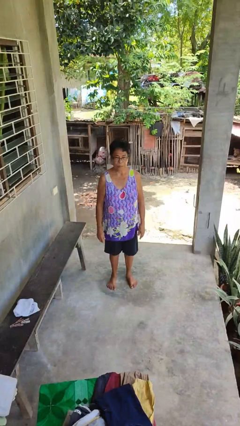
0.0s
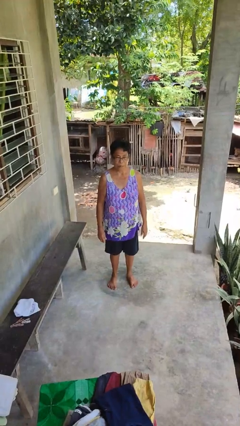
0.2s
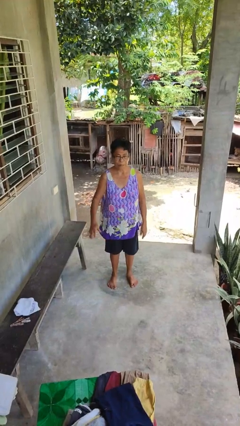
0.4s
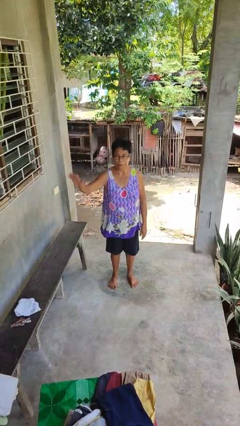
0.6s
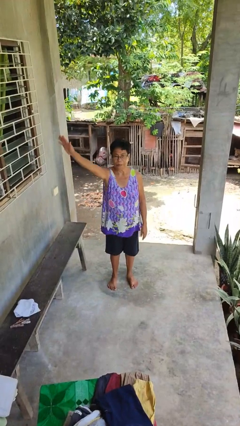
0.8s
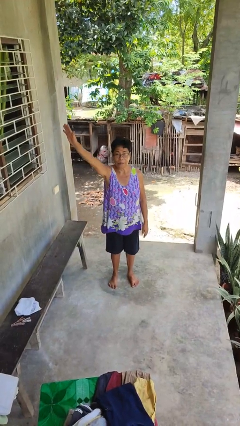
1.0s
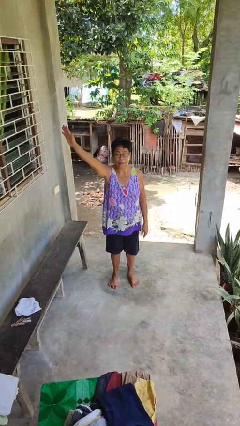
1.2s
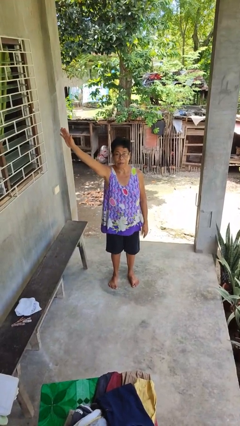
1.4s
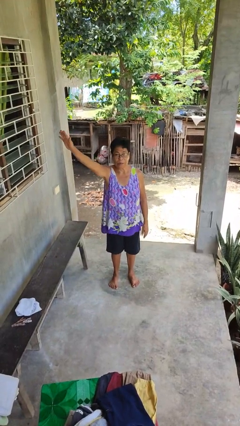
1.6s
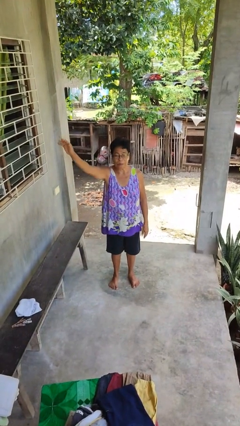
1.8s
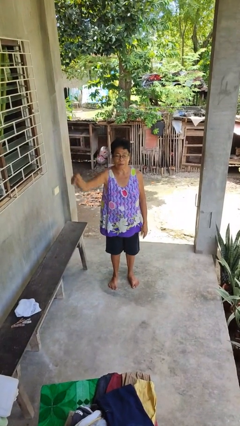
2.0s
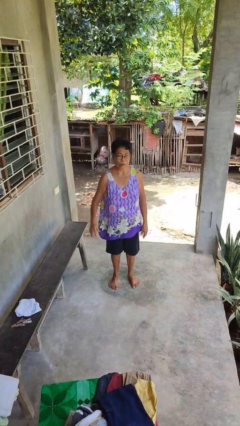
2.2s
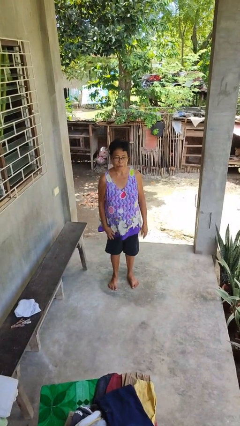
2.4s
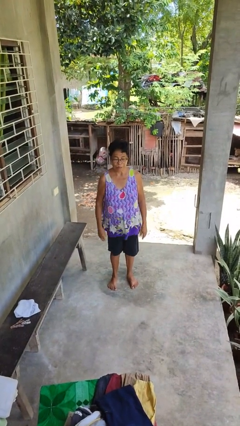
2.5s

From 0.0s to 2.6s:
person gestures stop

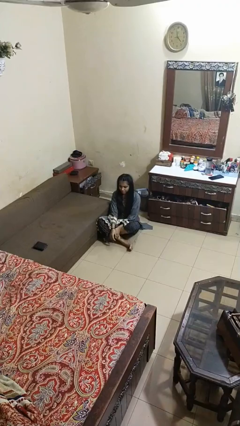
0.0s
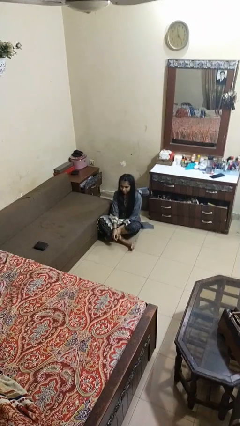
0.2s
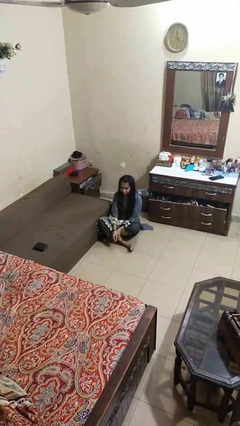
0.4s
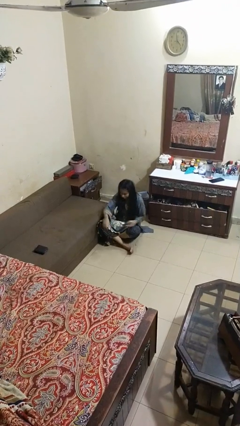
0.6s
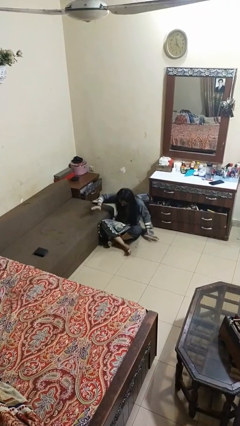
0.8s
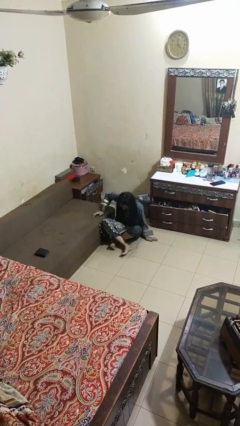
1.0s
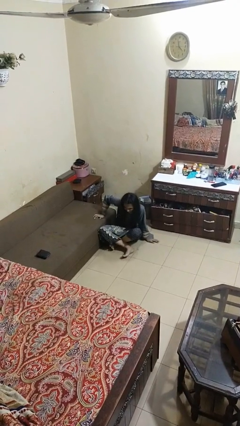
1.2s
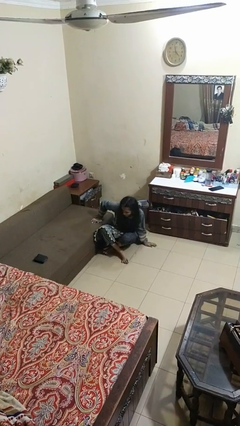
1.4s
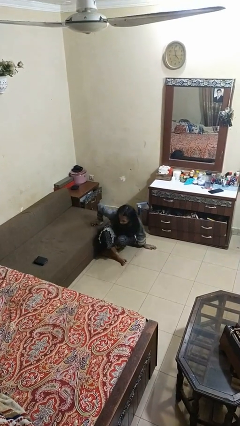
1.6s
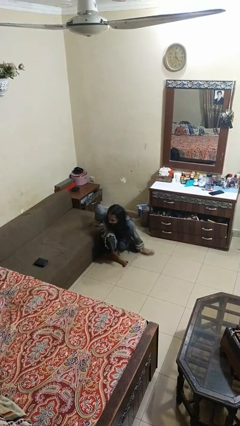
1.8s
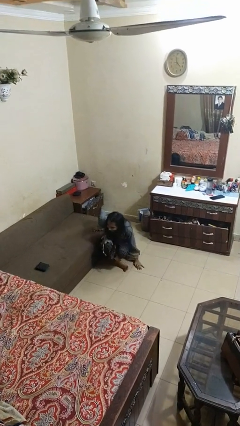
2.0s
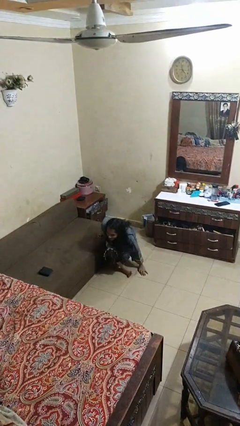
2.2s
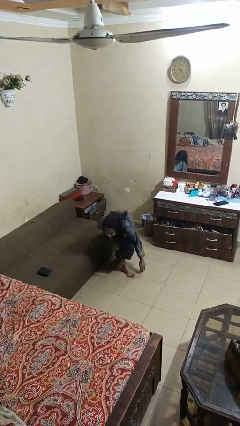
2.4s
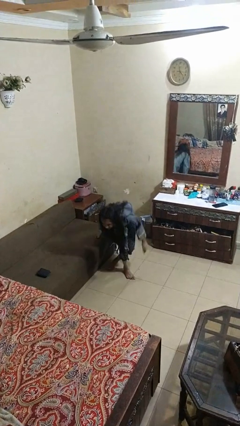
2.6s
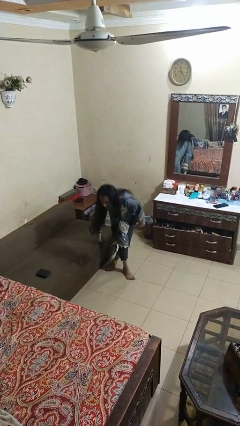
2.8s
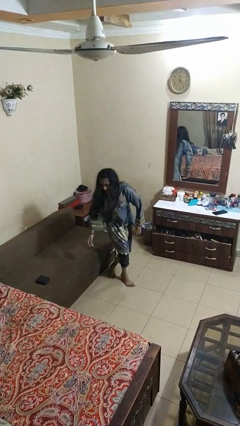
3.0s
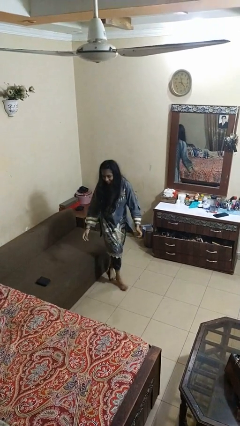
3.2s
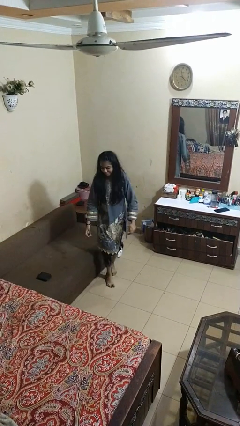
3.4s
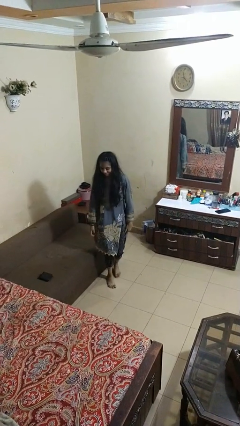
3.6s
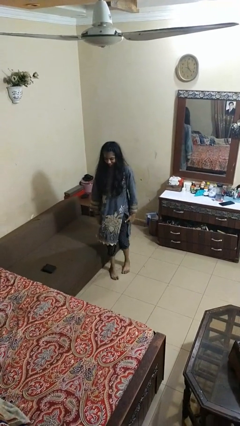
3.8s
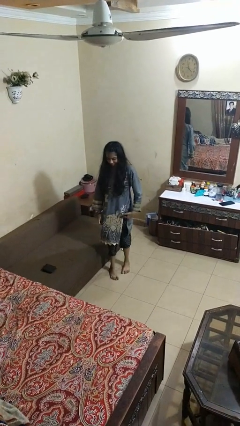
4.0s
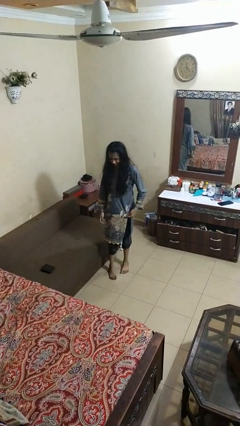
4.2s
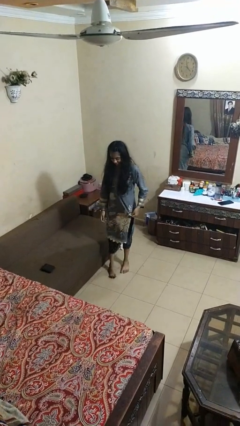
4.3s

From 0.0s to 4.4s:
person stands up from floor

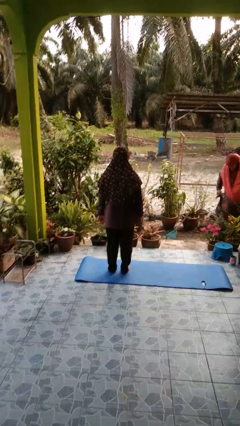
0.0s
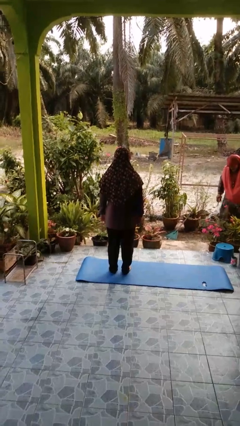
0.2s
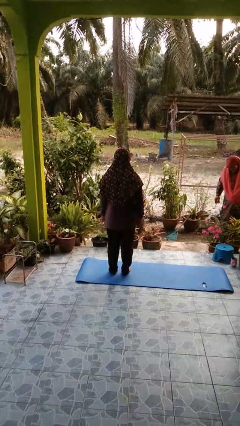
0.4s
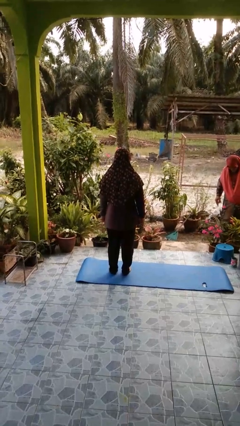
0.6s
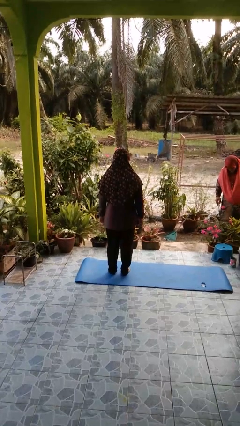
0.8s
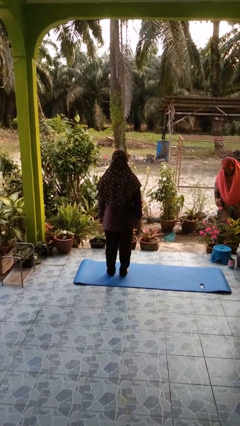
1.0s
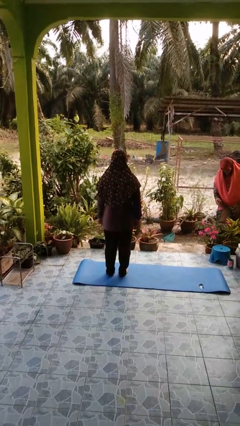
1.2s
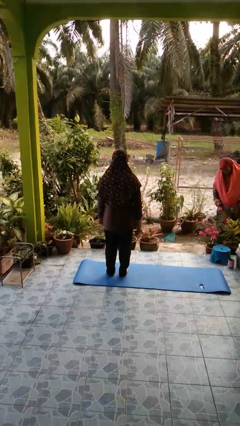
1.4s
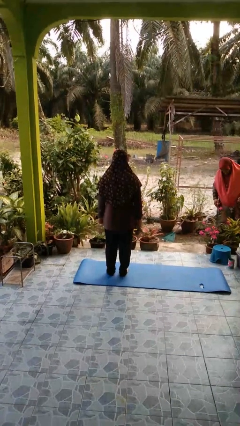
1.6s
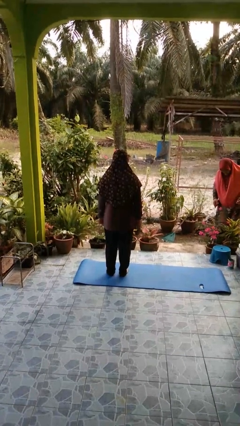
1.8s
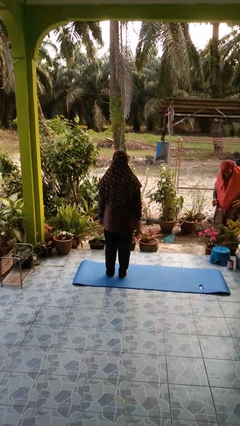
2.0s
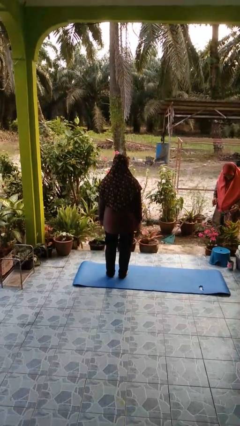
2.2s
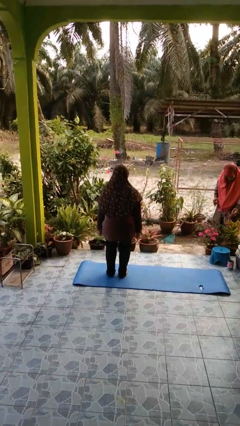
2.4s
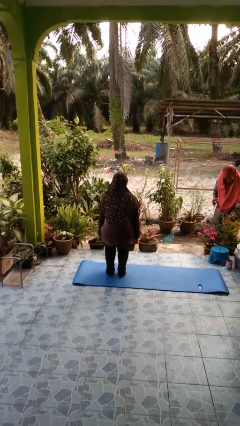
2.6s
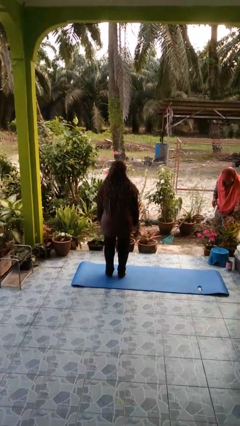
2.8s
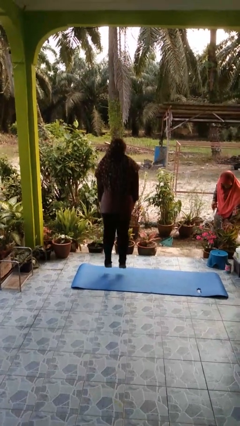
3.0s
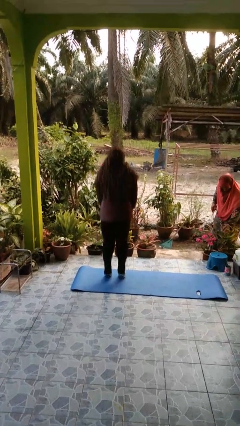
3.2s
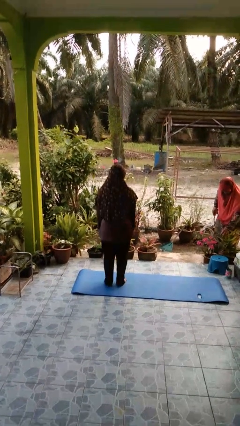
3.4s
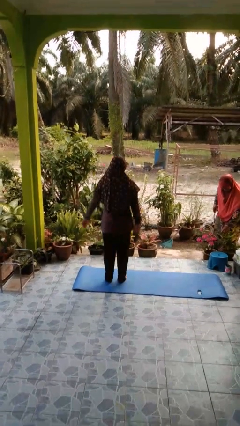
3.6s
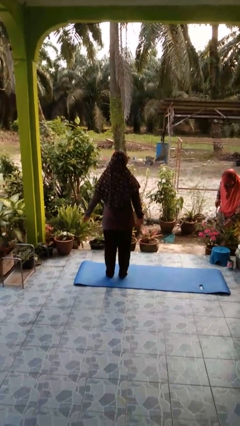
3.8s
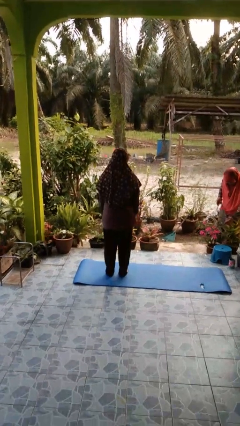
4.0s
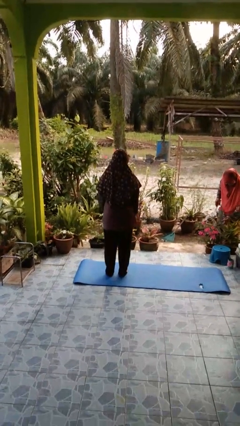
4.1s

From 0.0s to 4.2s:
person jumps

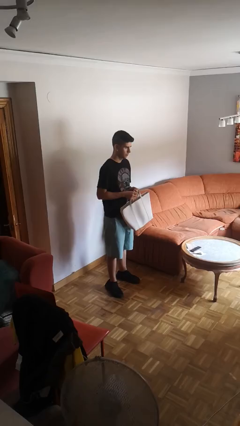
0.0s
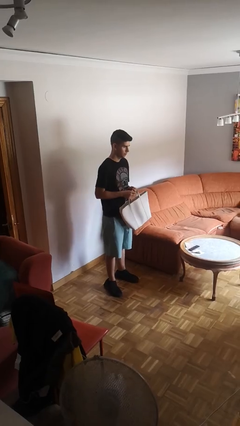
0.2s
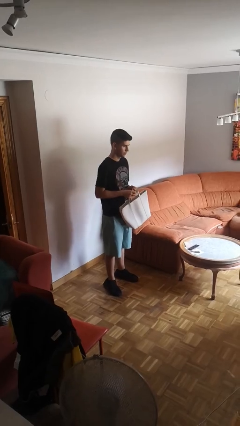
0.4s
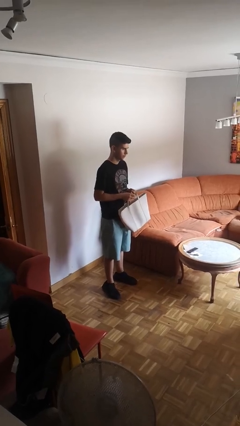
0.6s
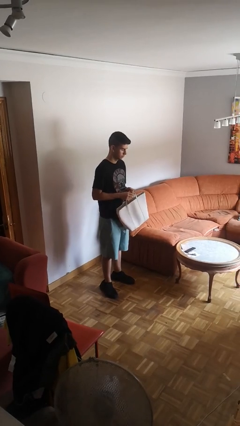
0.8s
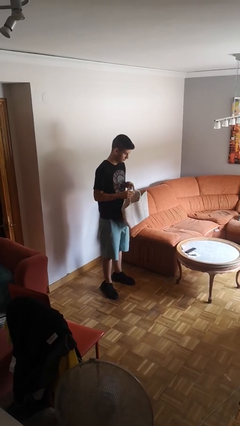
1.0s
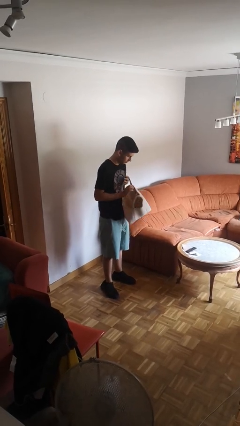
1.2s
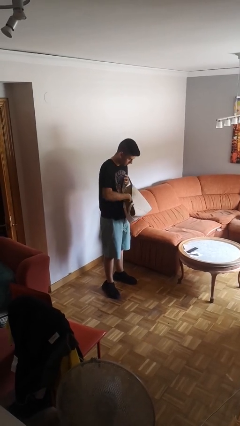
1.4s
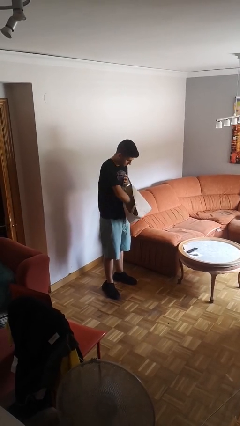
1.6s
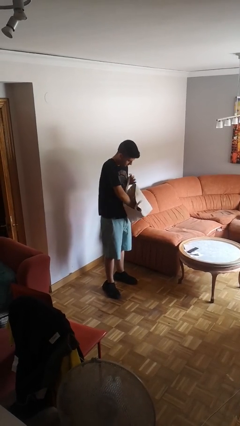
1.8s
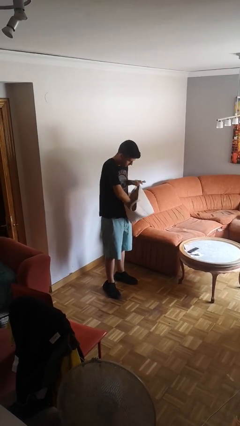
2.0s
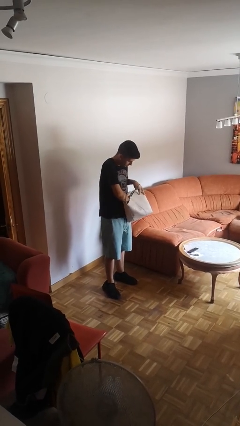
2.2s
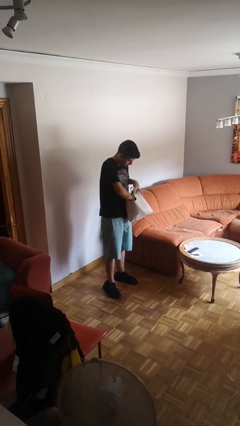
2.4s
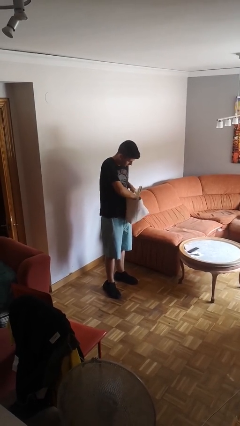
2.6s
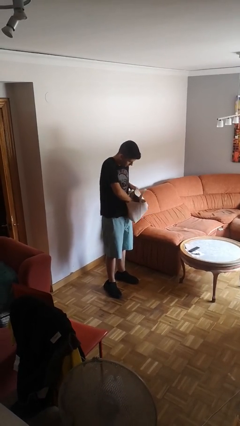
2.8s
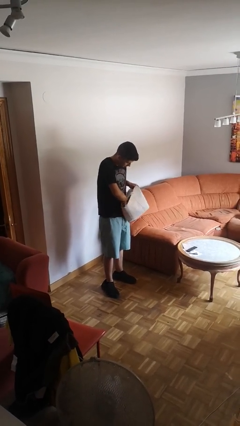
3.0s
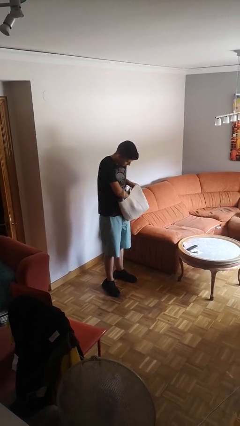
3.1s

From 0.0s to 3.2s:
person searches in purse

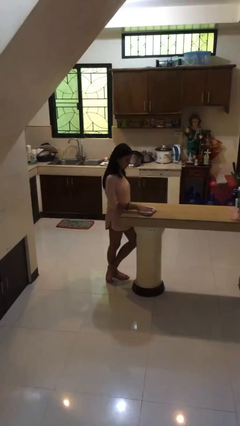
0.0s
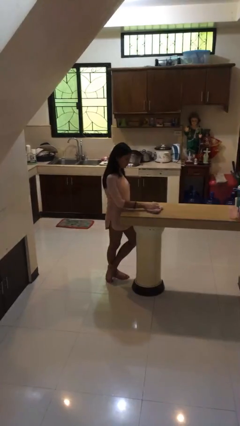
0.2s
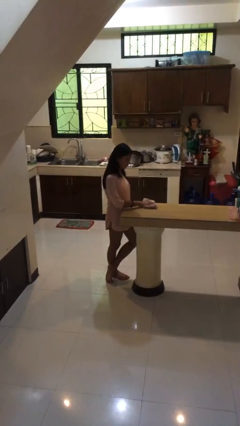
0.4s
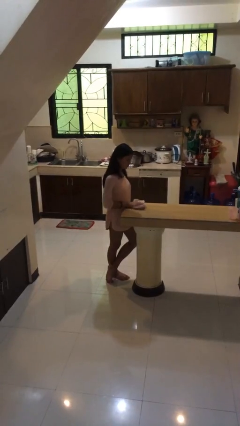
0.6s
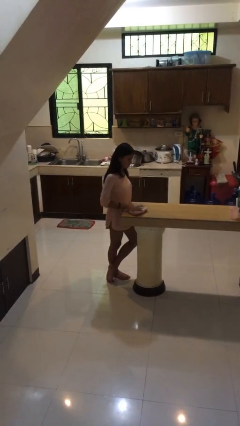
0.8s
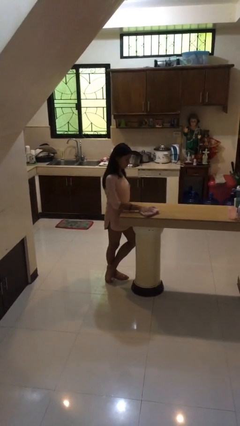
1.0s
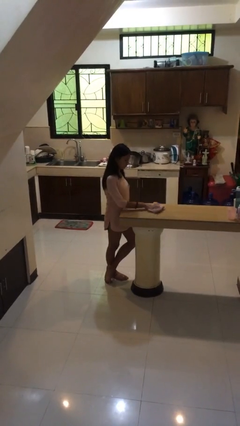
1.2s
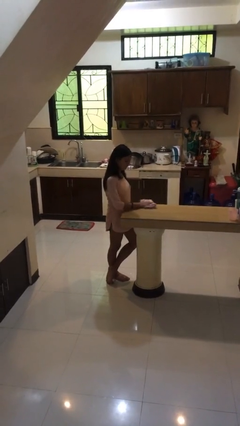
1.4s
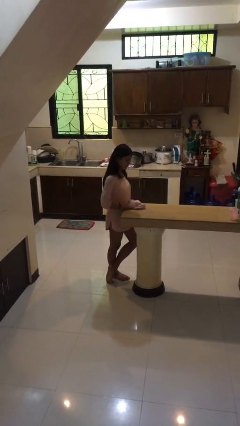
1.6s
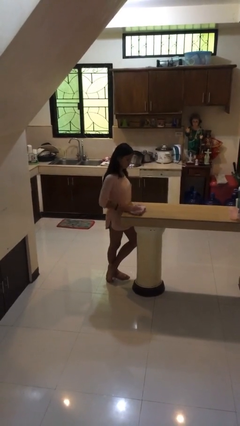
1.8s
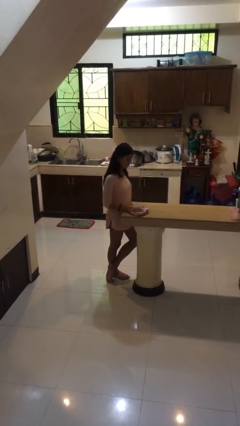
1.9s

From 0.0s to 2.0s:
person cleans table with rag

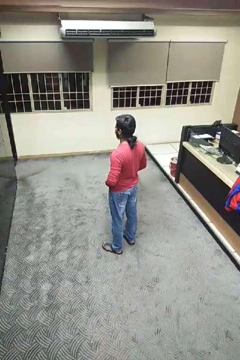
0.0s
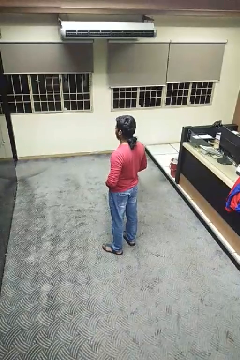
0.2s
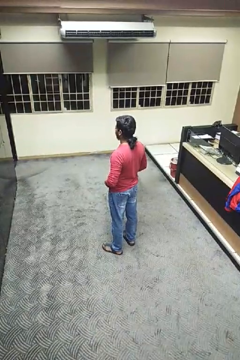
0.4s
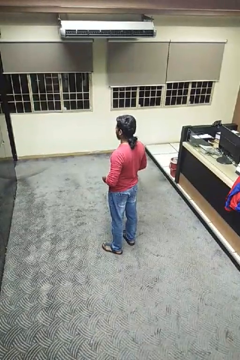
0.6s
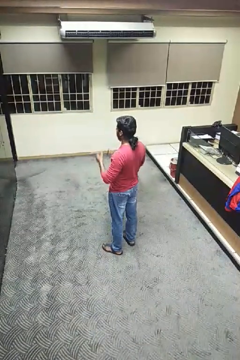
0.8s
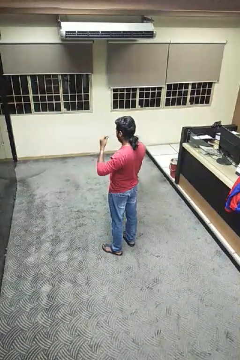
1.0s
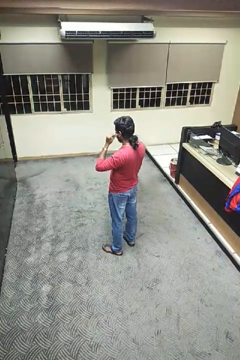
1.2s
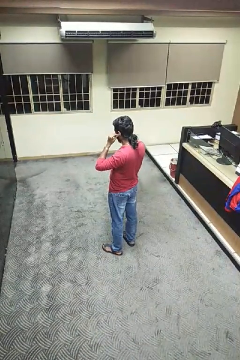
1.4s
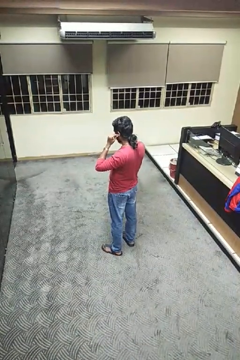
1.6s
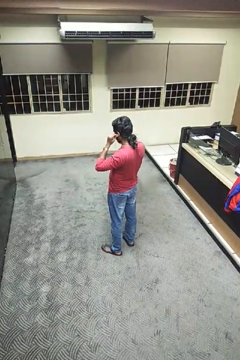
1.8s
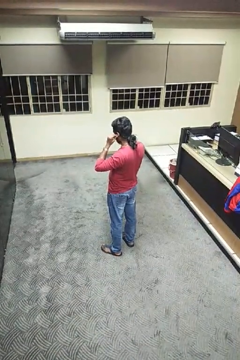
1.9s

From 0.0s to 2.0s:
person puts on headphones
